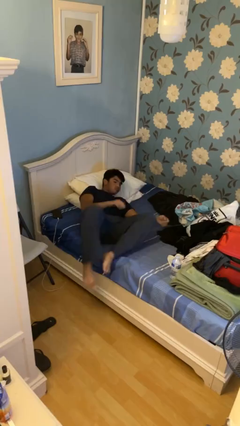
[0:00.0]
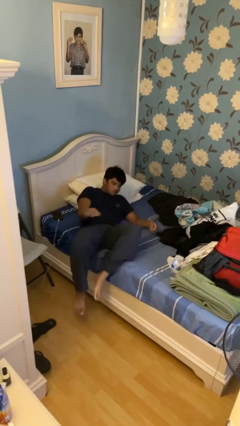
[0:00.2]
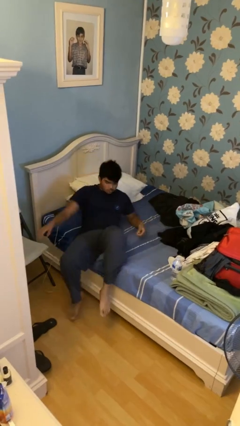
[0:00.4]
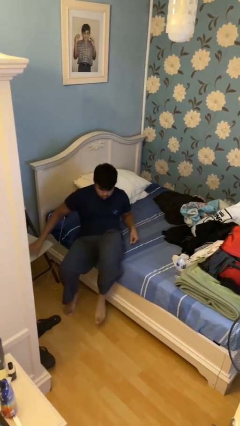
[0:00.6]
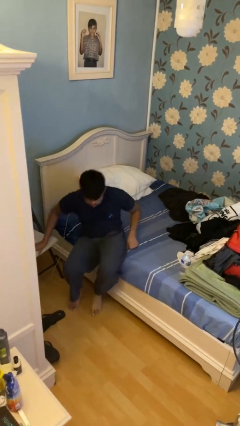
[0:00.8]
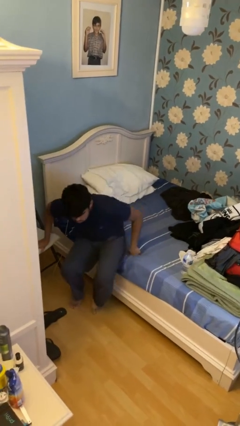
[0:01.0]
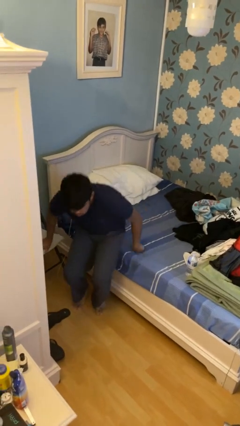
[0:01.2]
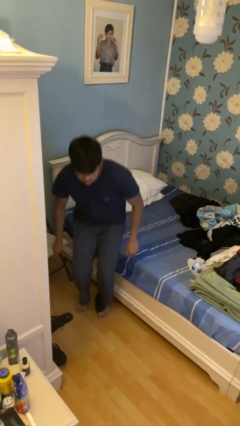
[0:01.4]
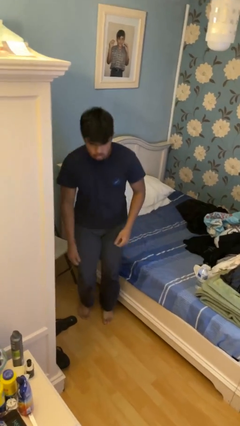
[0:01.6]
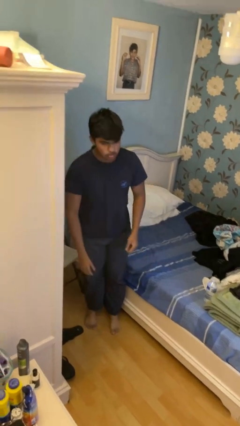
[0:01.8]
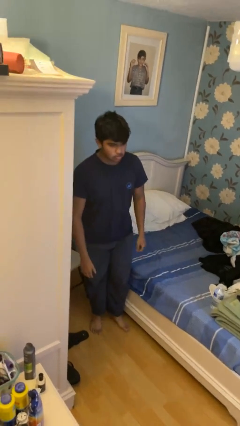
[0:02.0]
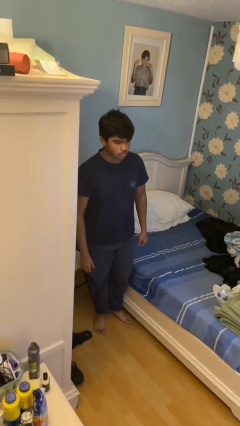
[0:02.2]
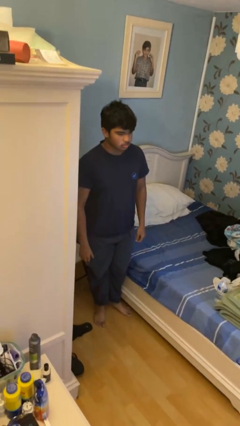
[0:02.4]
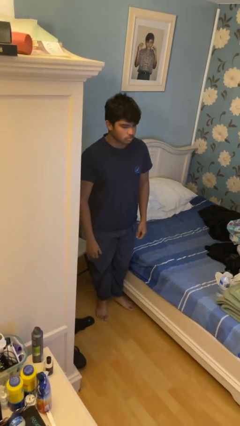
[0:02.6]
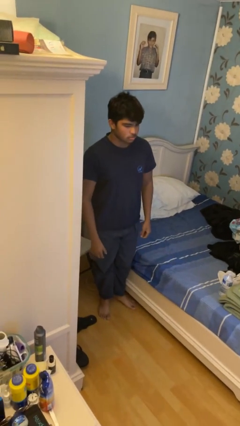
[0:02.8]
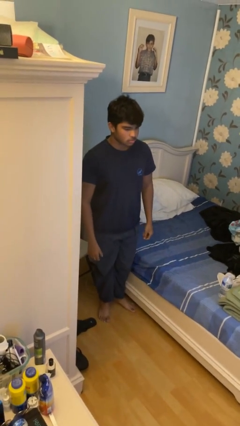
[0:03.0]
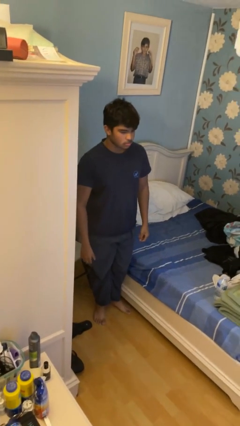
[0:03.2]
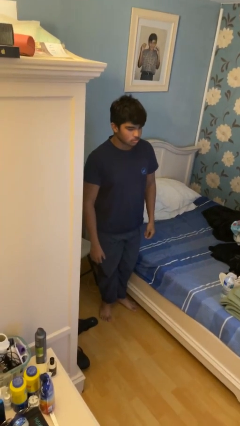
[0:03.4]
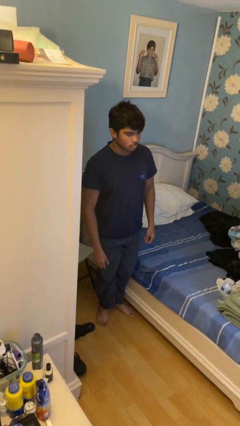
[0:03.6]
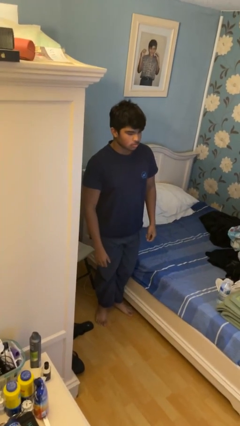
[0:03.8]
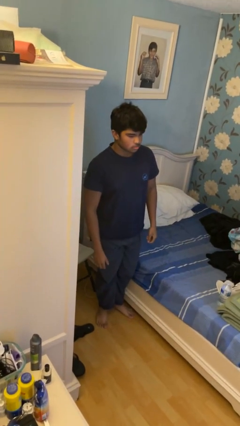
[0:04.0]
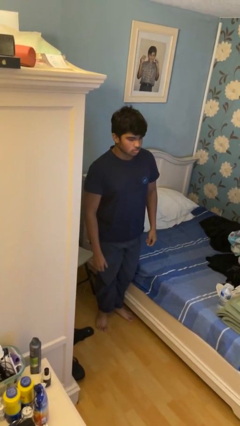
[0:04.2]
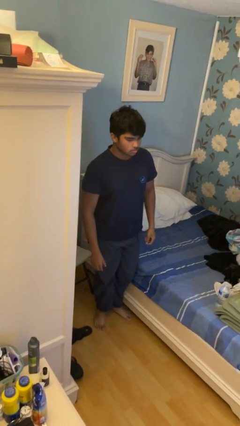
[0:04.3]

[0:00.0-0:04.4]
person stands up

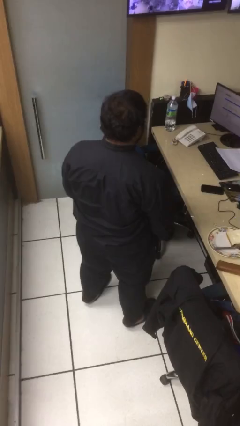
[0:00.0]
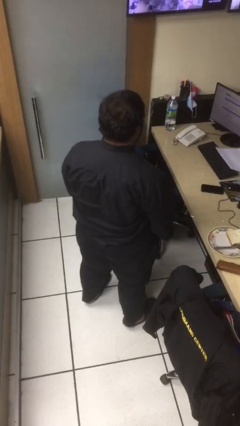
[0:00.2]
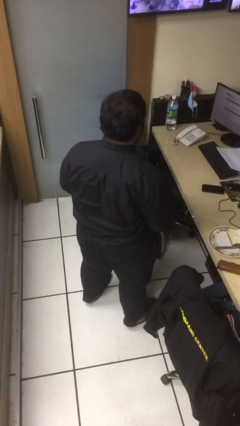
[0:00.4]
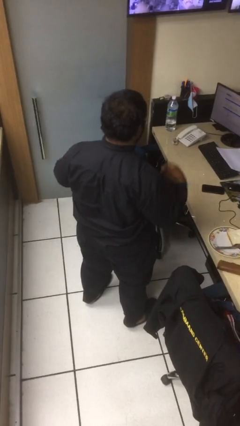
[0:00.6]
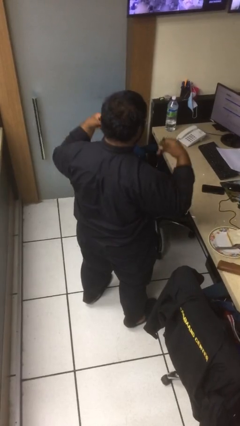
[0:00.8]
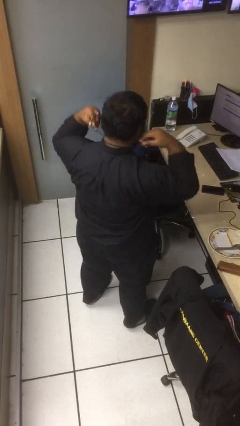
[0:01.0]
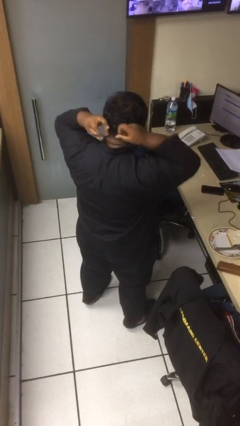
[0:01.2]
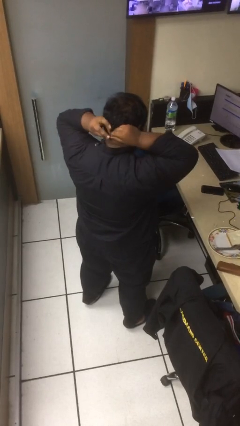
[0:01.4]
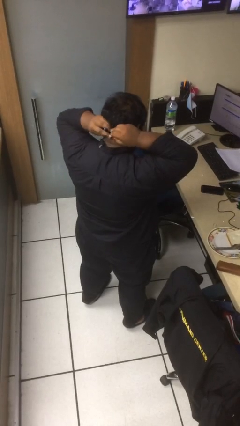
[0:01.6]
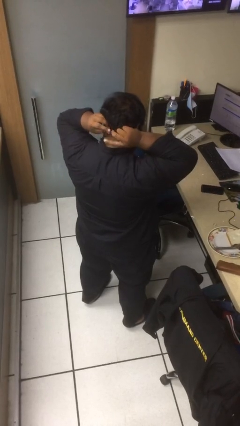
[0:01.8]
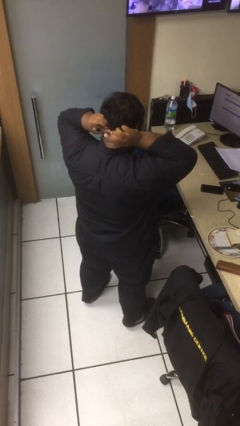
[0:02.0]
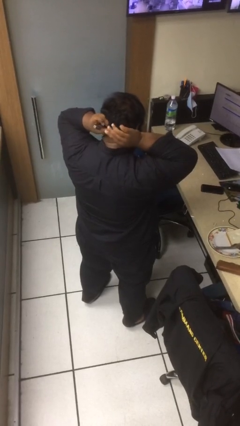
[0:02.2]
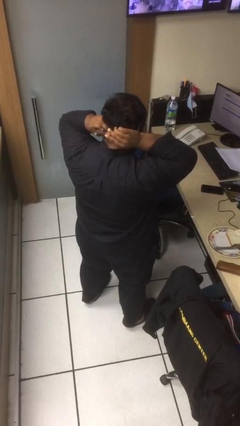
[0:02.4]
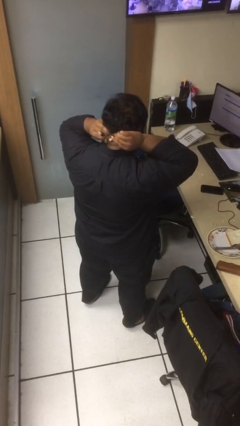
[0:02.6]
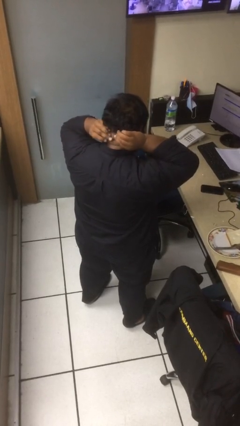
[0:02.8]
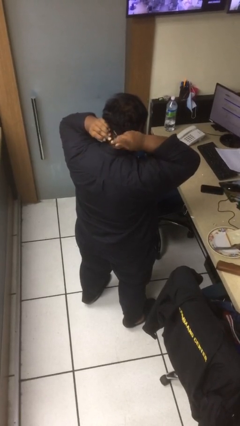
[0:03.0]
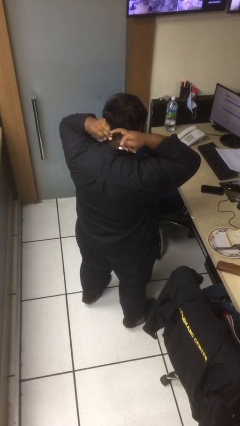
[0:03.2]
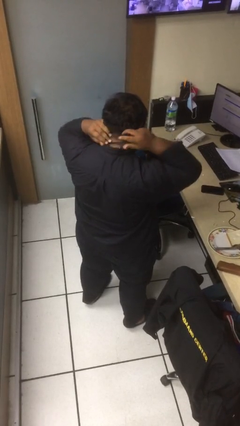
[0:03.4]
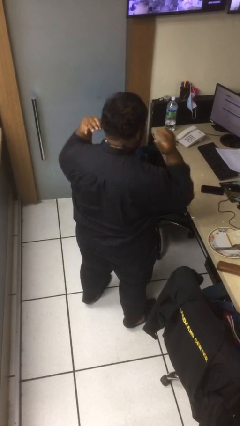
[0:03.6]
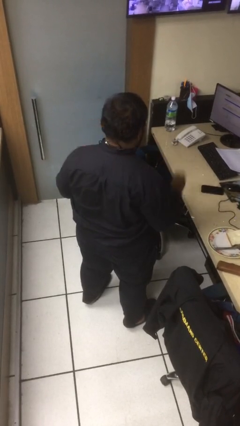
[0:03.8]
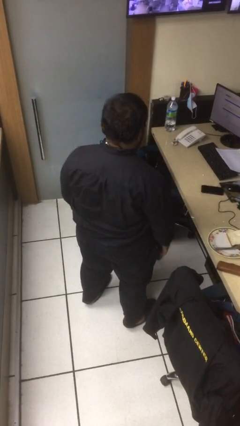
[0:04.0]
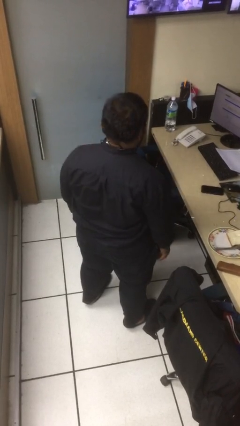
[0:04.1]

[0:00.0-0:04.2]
person puts on necklace

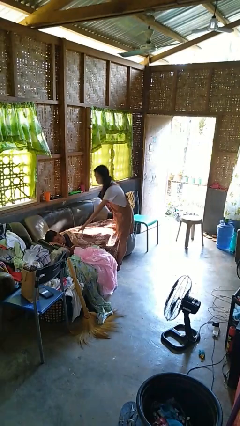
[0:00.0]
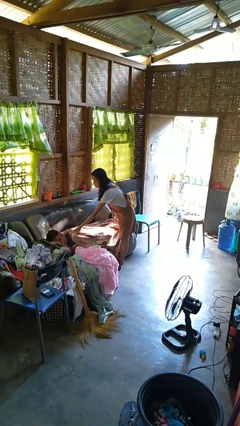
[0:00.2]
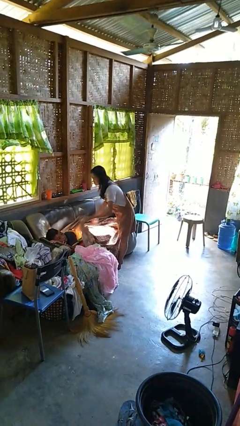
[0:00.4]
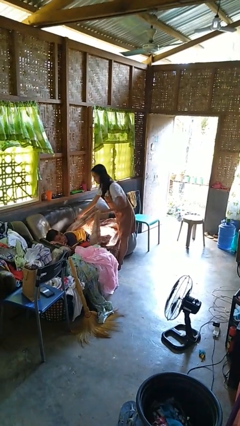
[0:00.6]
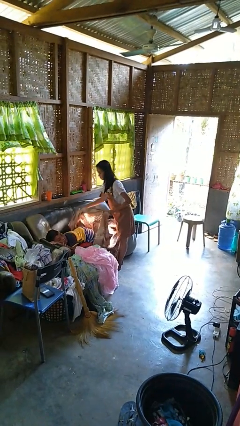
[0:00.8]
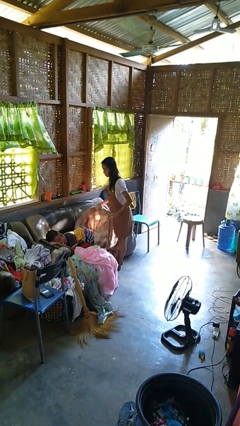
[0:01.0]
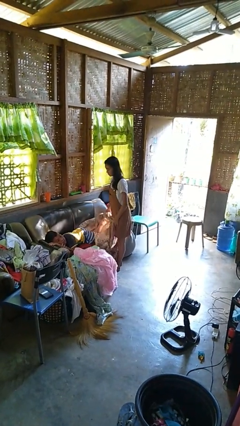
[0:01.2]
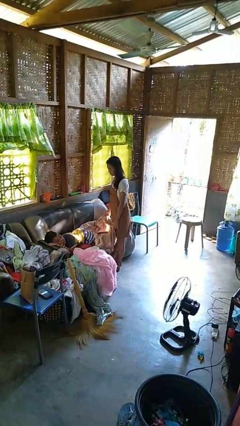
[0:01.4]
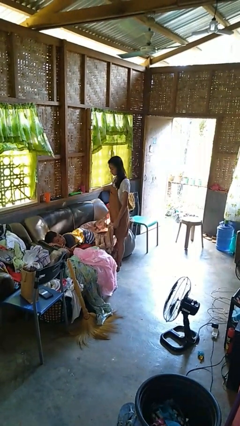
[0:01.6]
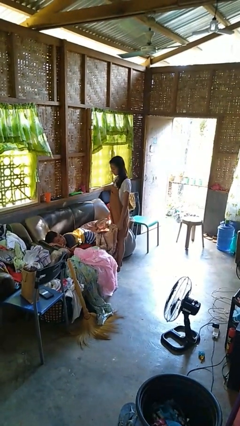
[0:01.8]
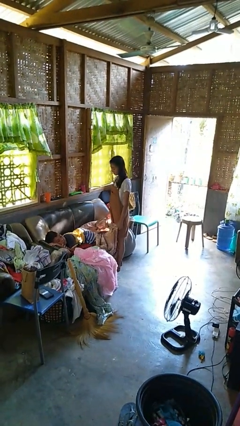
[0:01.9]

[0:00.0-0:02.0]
person uncovers friend with blanket

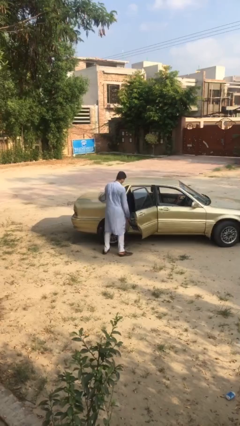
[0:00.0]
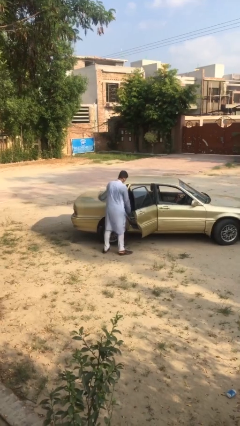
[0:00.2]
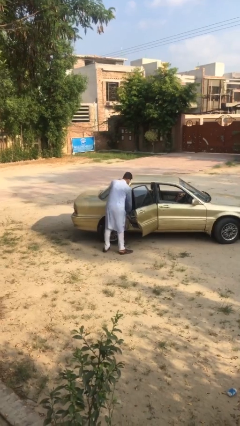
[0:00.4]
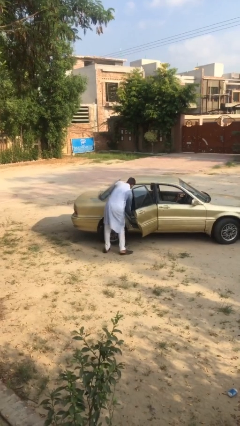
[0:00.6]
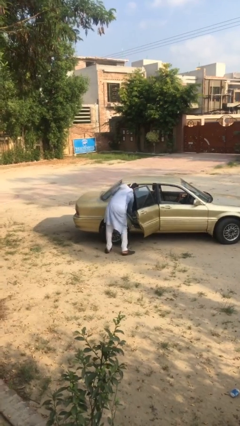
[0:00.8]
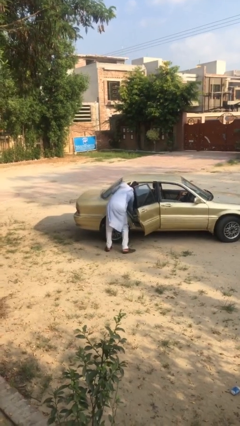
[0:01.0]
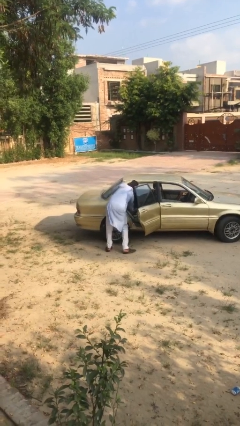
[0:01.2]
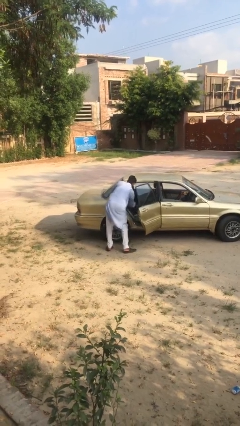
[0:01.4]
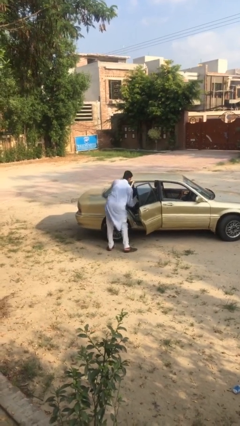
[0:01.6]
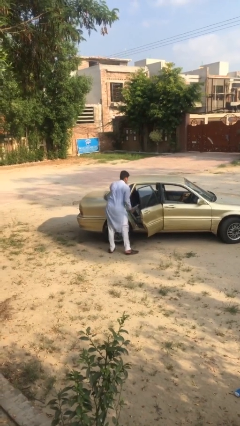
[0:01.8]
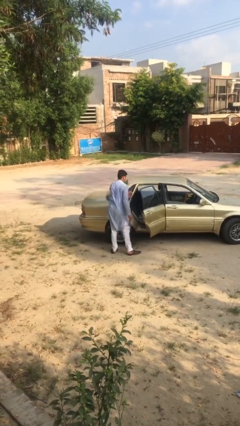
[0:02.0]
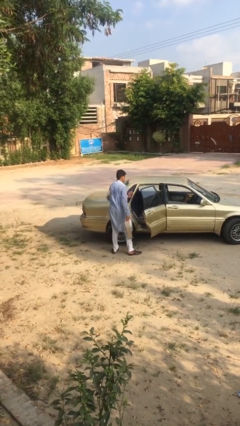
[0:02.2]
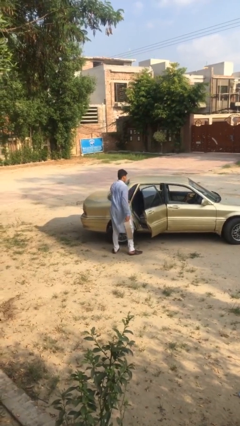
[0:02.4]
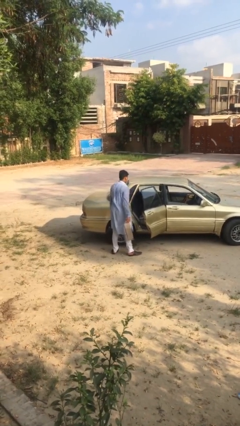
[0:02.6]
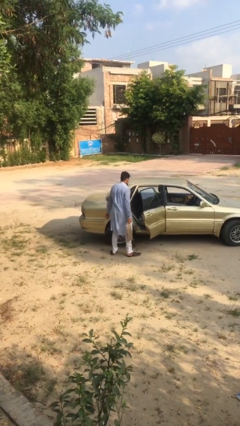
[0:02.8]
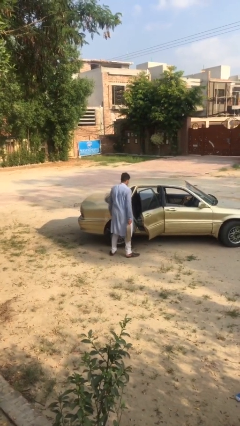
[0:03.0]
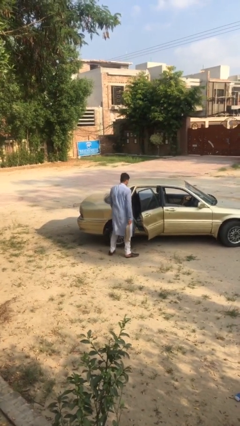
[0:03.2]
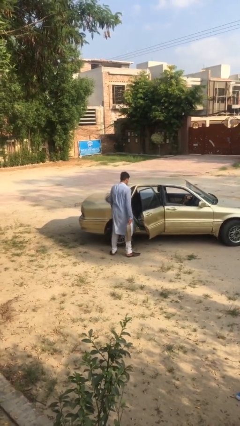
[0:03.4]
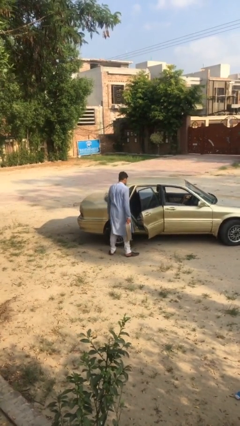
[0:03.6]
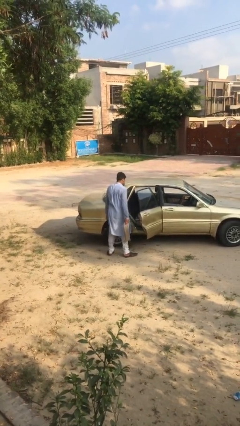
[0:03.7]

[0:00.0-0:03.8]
person unloads car

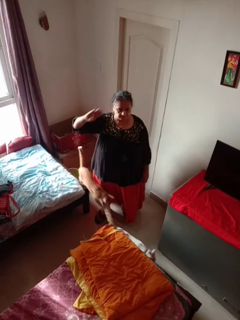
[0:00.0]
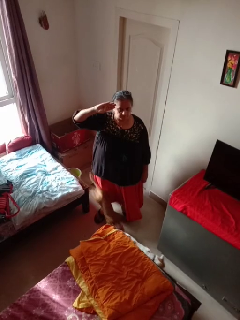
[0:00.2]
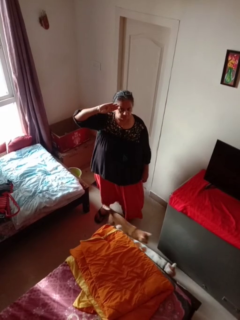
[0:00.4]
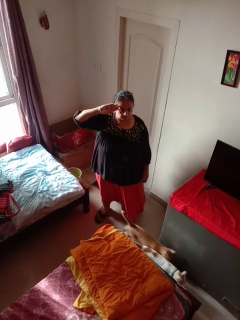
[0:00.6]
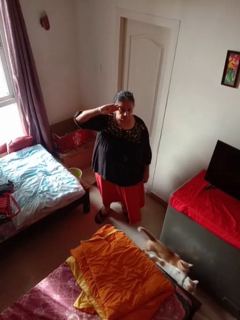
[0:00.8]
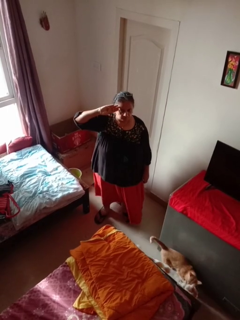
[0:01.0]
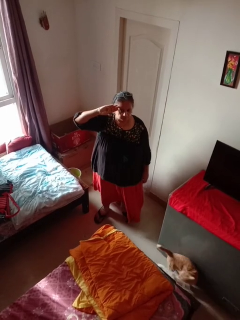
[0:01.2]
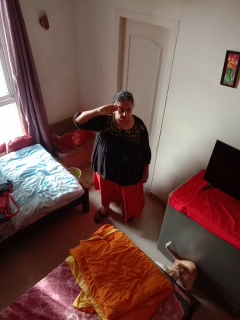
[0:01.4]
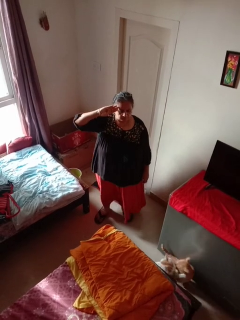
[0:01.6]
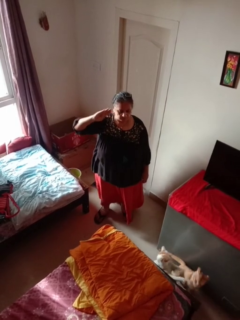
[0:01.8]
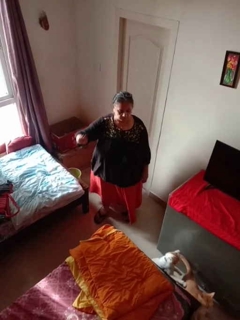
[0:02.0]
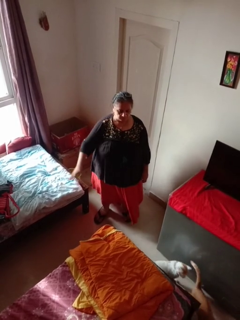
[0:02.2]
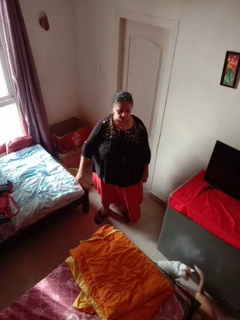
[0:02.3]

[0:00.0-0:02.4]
person salutes

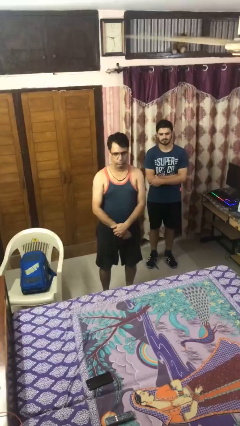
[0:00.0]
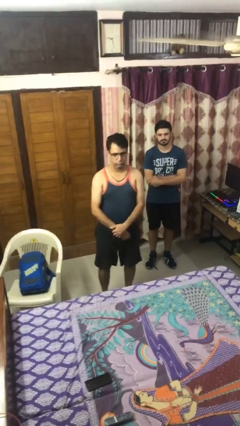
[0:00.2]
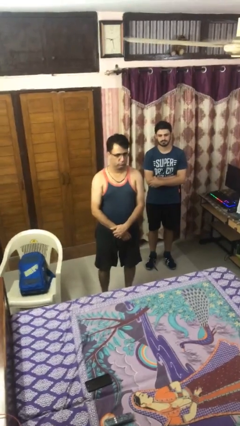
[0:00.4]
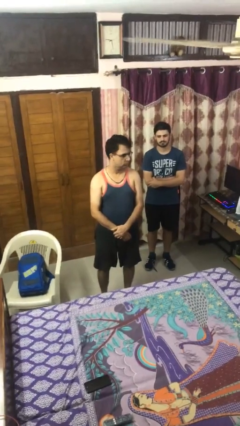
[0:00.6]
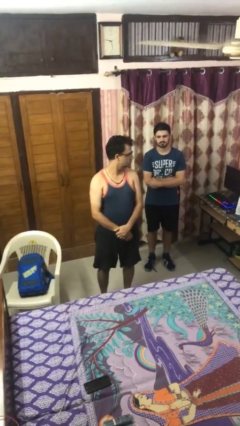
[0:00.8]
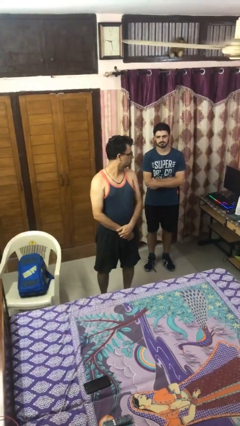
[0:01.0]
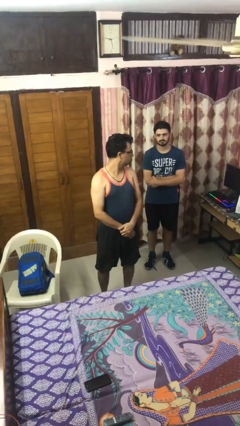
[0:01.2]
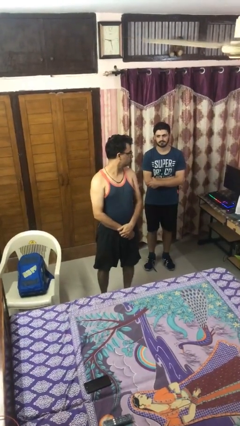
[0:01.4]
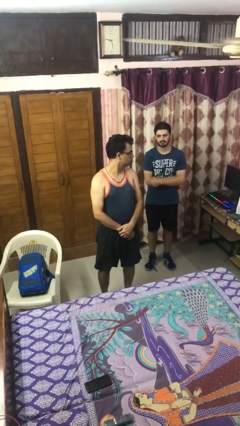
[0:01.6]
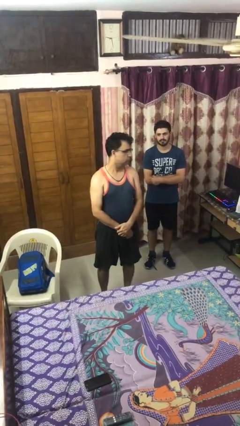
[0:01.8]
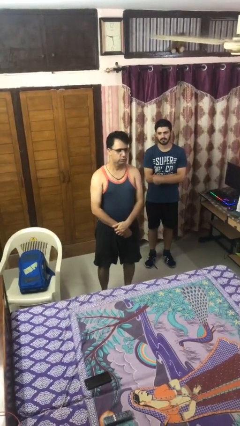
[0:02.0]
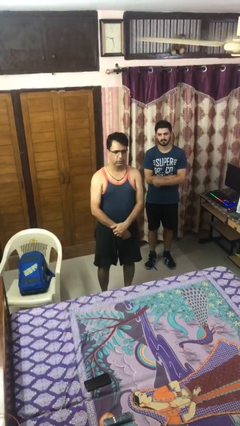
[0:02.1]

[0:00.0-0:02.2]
person looks over shoulder
